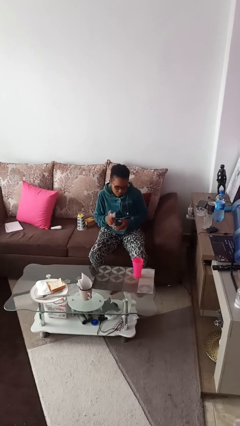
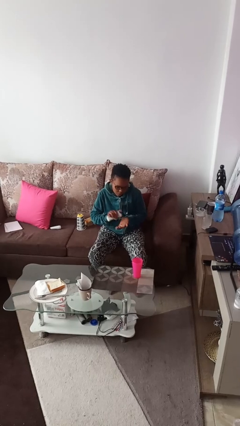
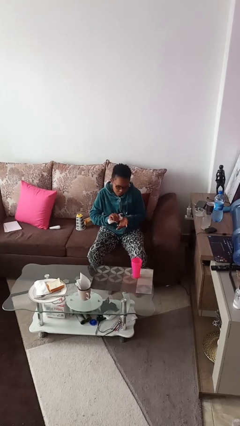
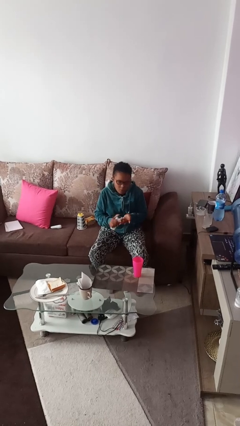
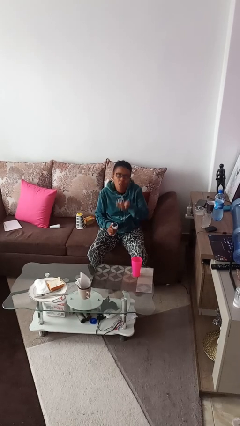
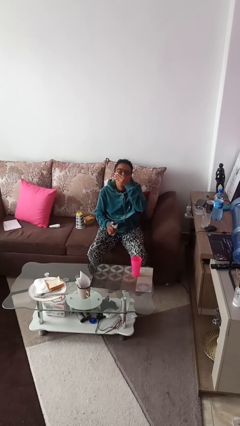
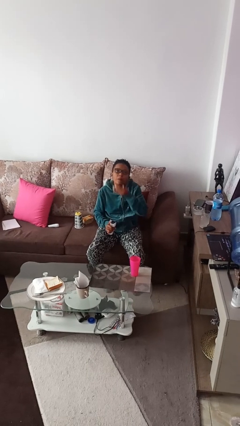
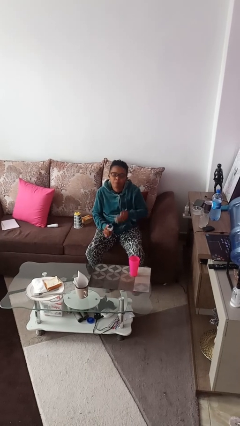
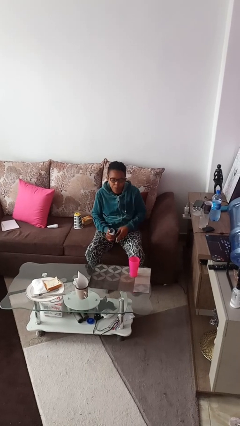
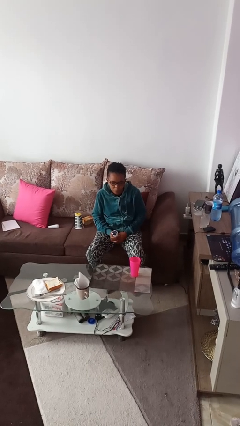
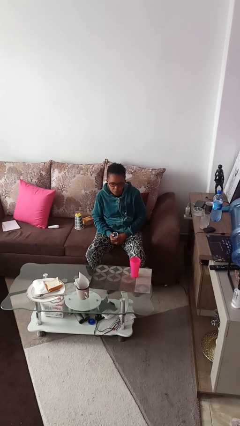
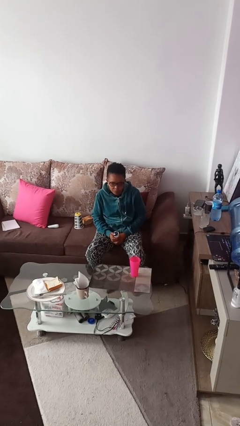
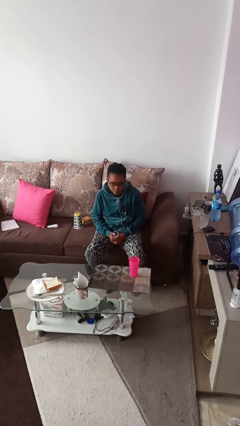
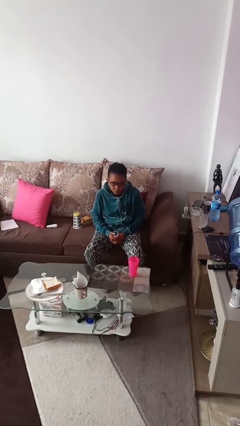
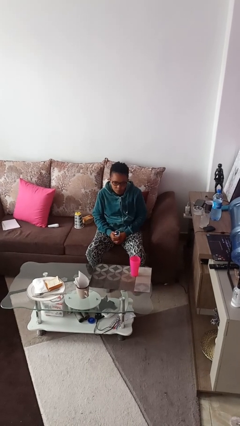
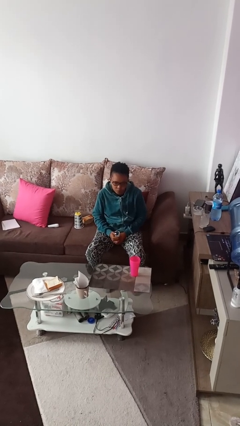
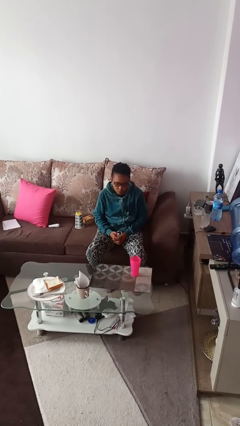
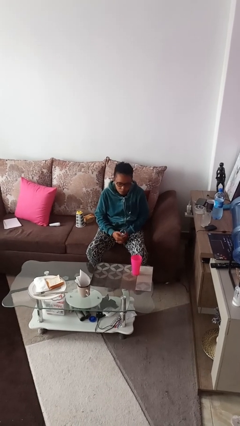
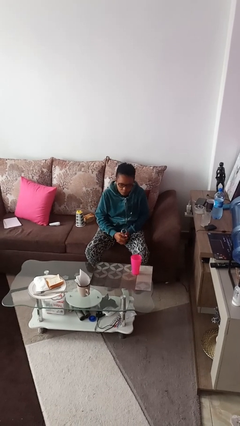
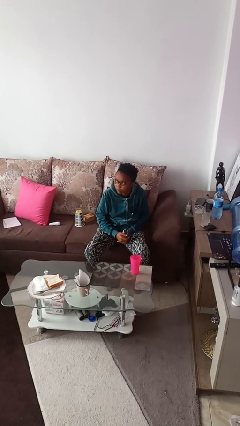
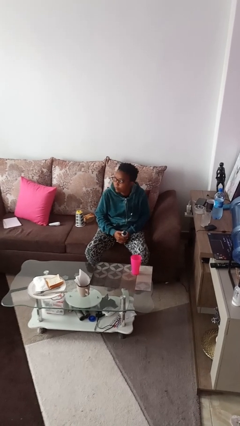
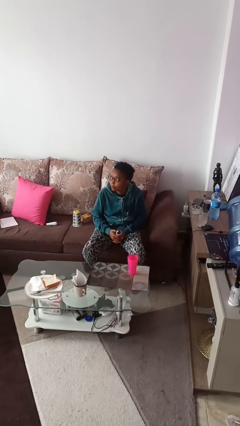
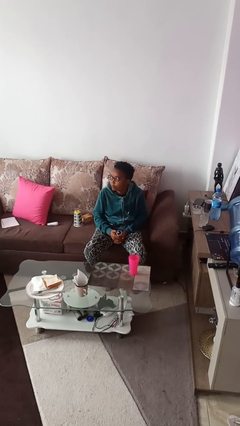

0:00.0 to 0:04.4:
person takes medicine pills

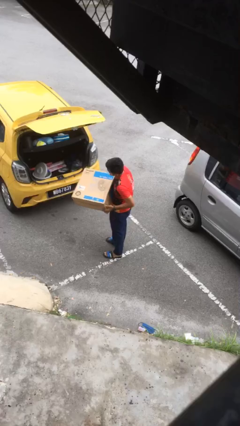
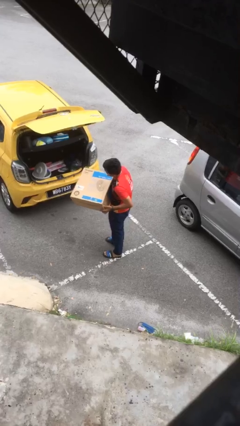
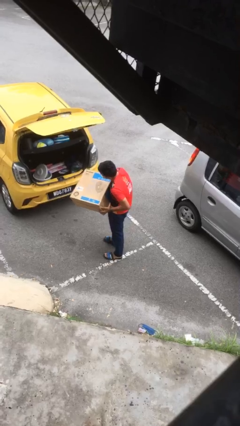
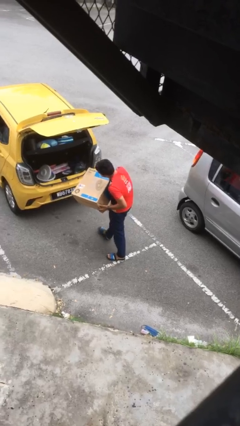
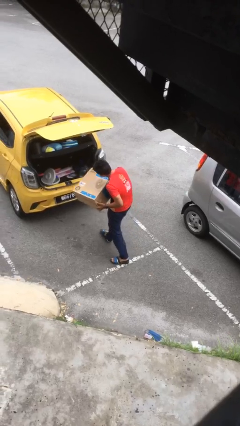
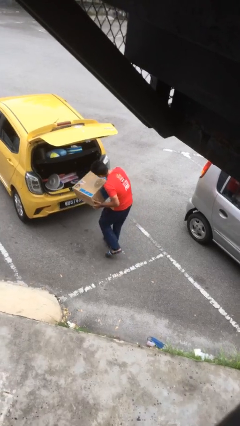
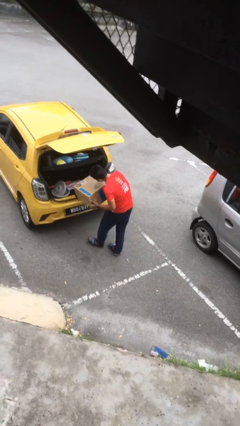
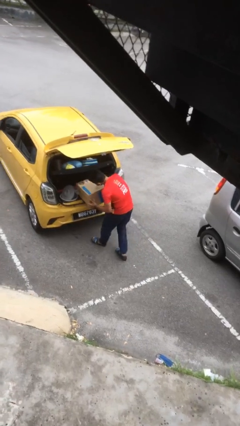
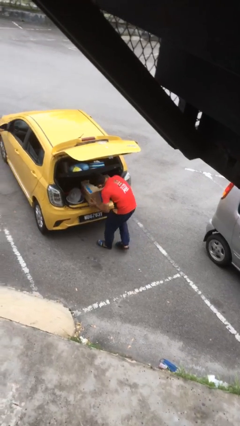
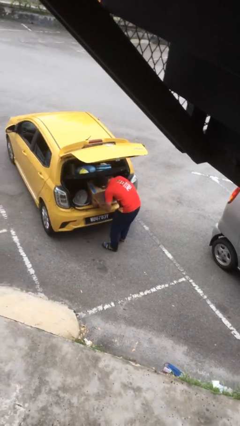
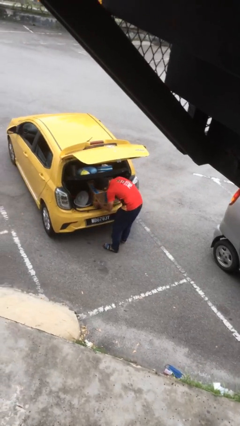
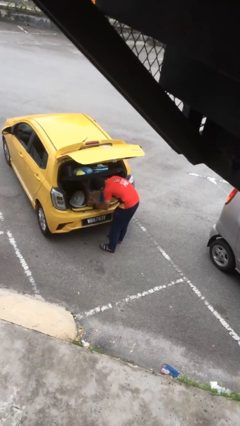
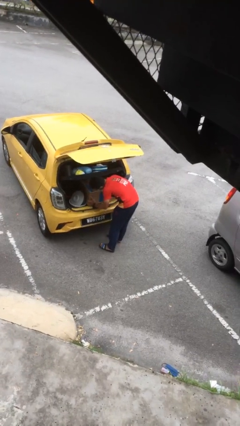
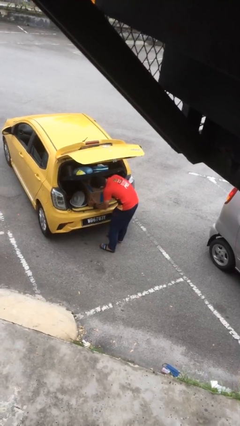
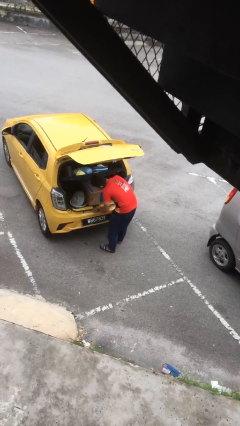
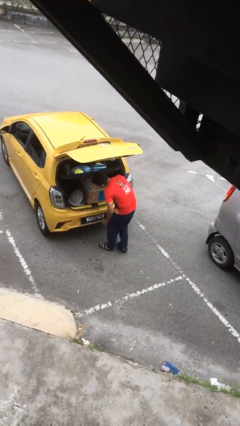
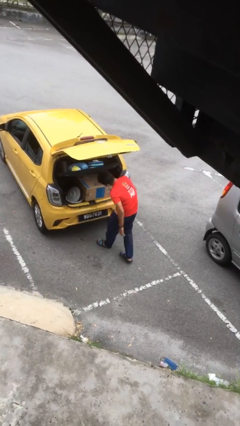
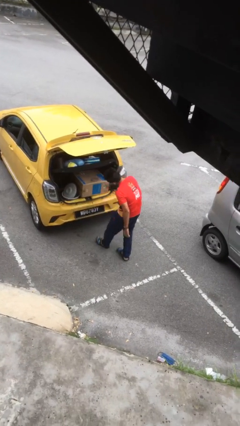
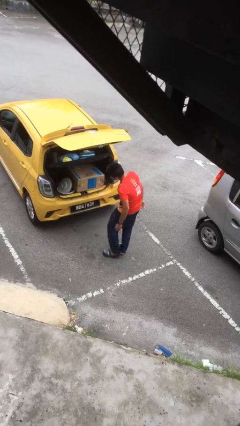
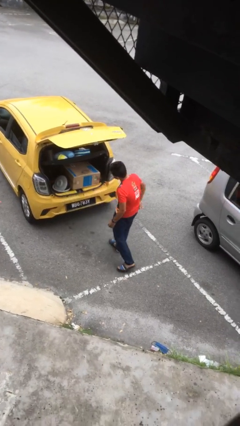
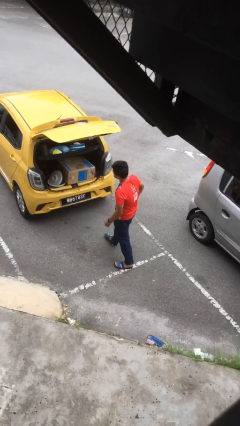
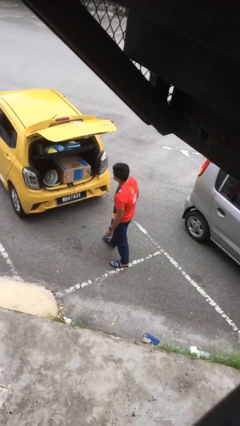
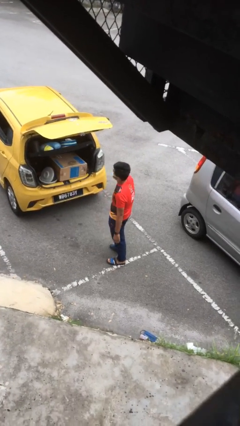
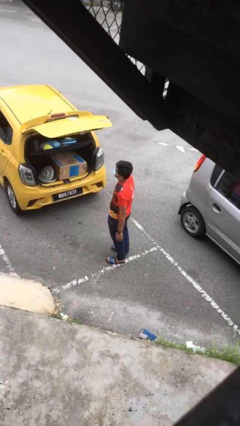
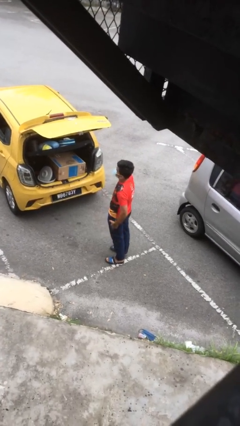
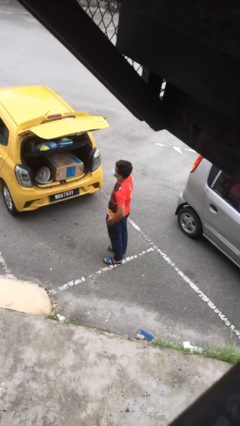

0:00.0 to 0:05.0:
person loads car

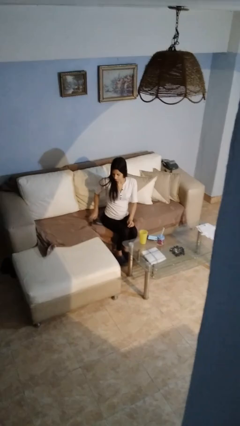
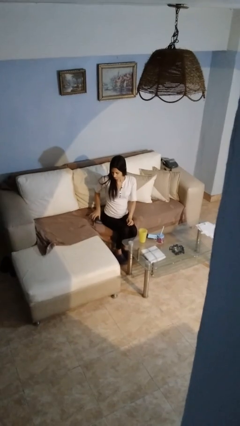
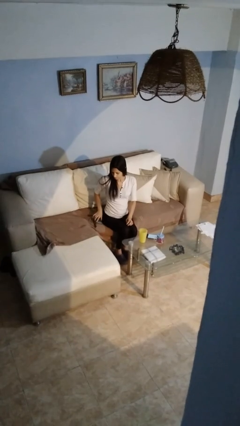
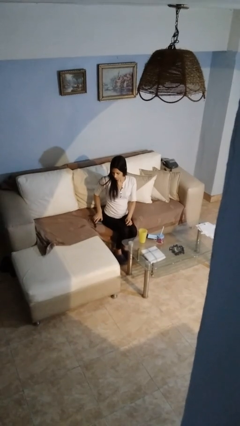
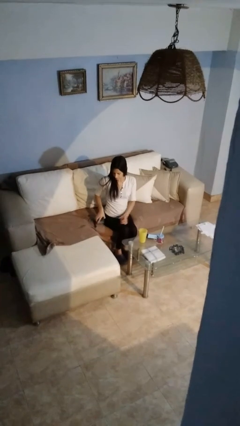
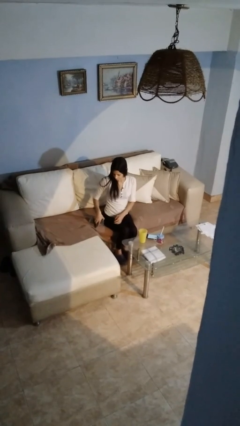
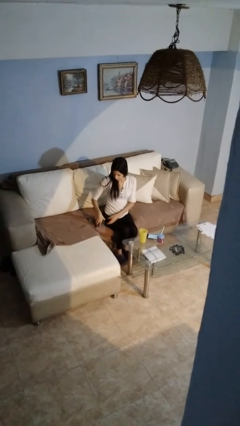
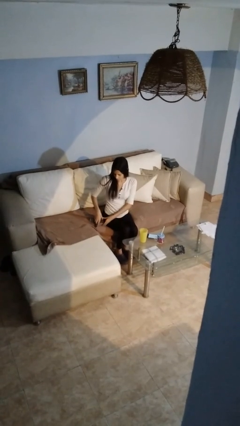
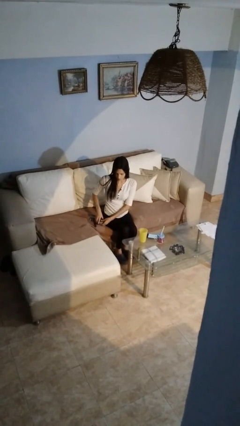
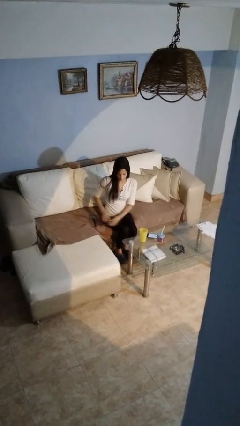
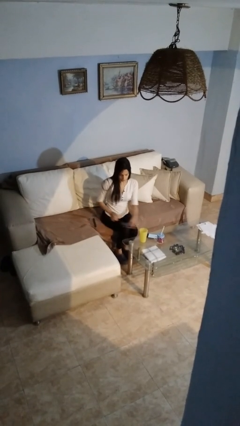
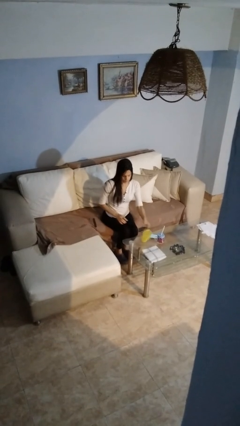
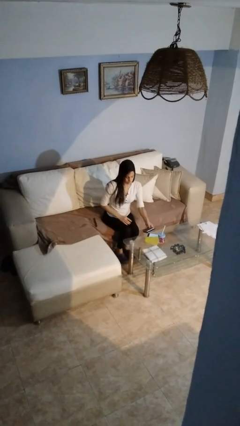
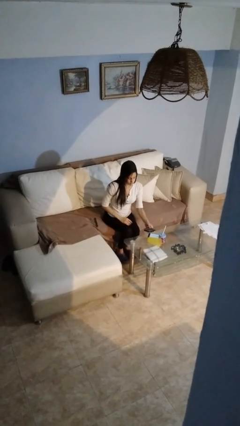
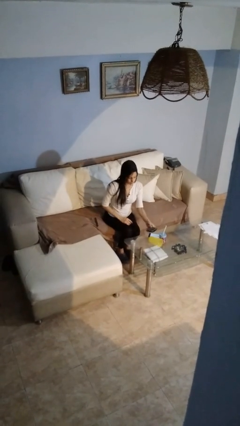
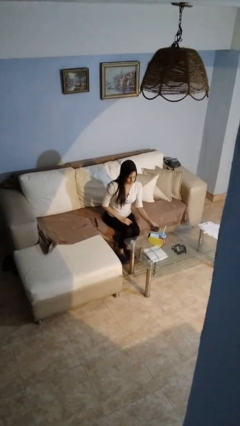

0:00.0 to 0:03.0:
person knocks over glass

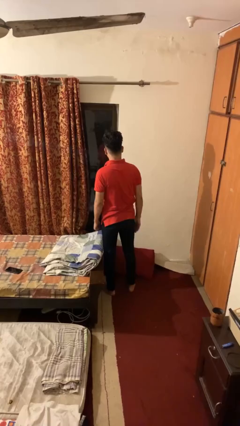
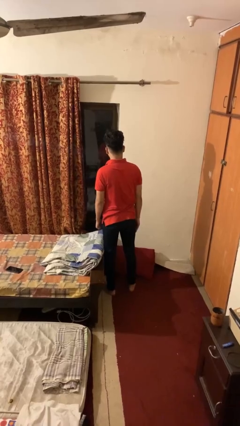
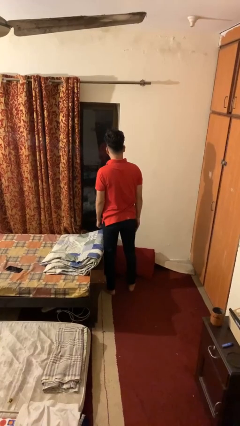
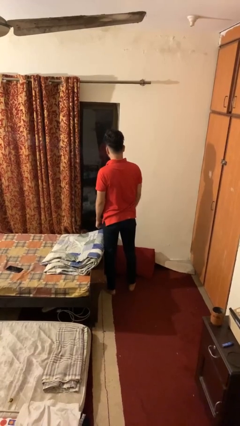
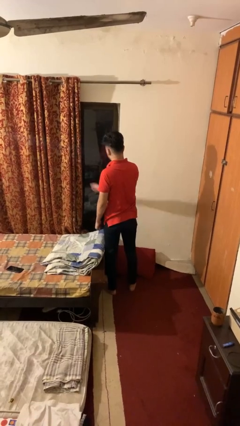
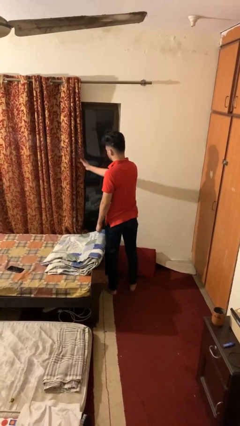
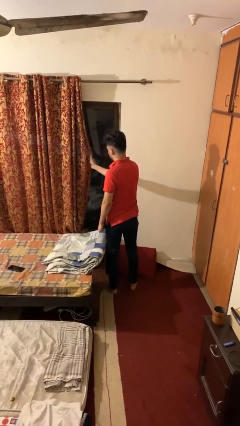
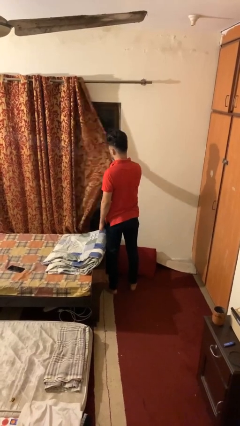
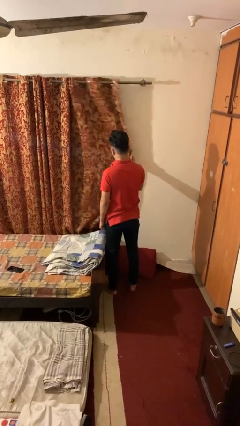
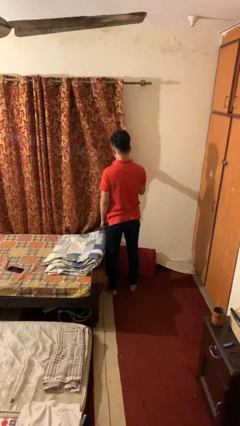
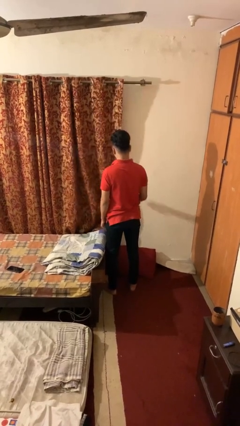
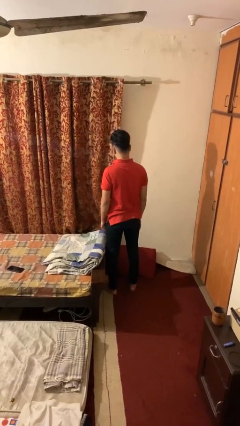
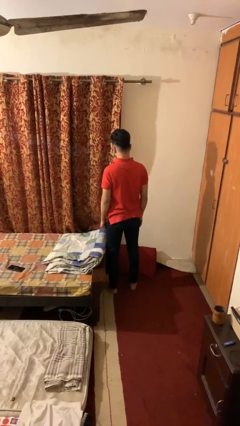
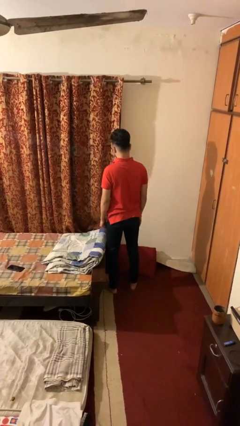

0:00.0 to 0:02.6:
person closes curtains

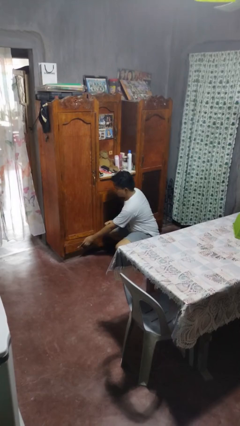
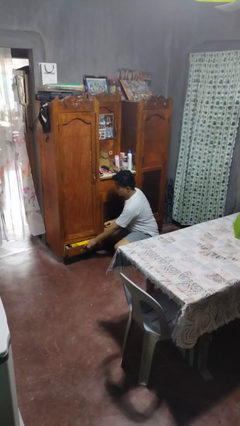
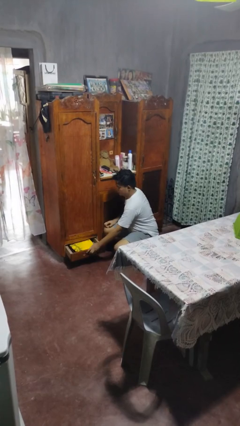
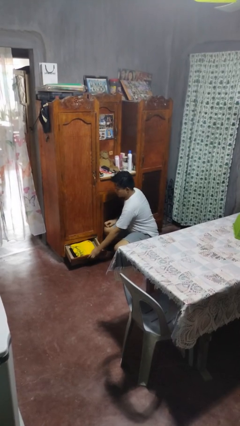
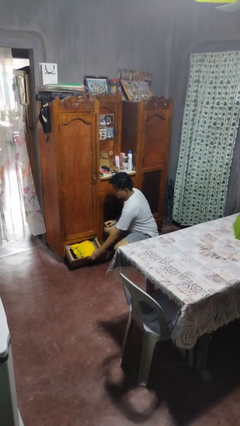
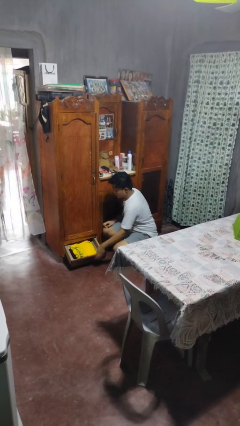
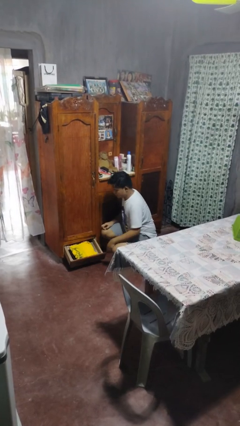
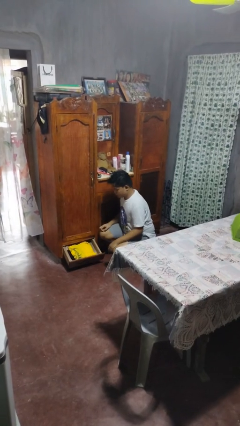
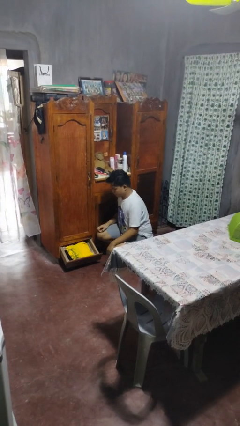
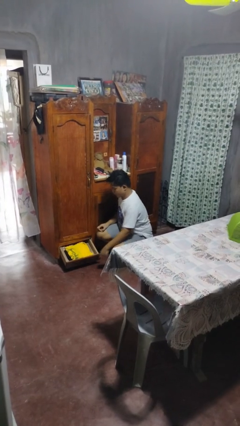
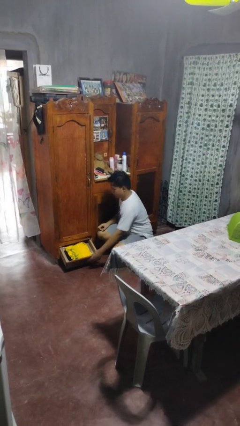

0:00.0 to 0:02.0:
person opens dresser drawer

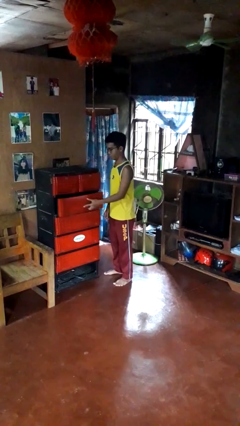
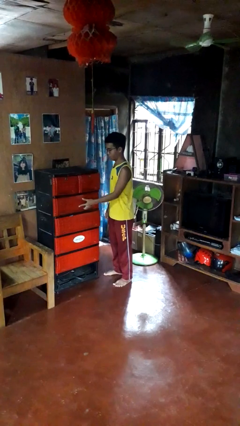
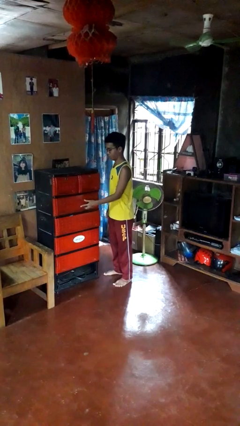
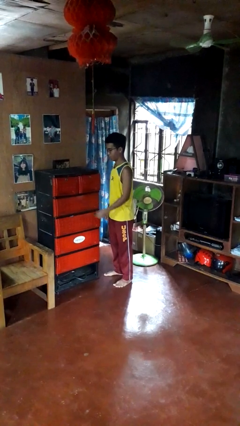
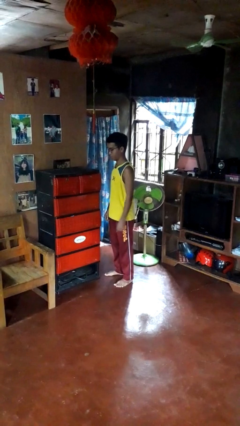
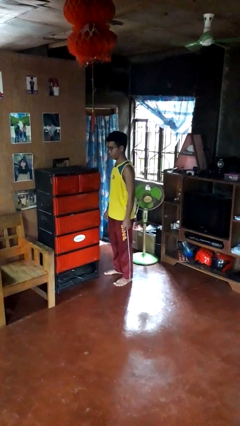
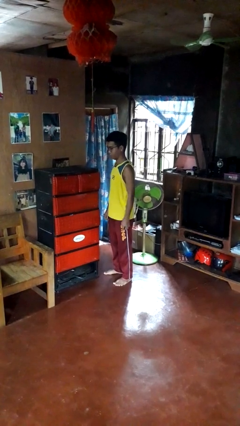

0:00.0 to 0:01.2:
person closes dresser drawer
